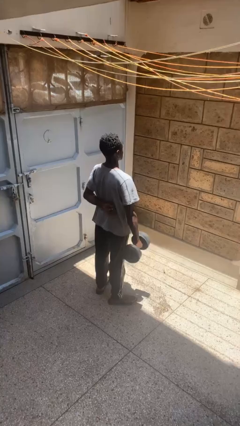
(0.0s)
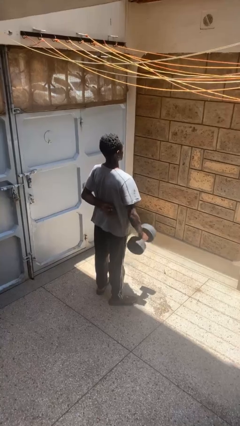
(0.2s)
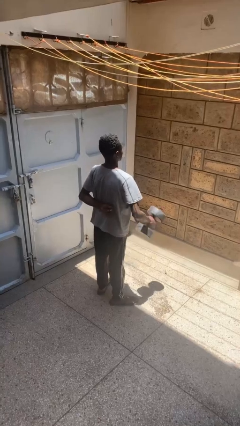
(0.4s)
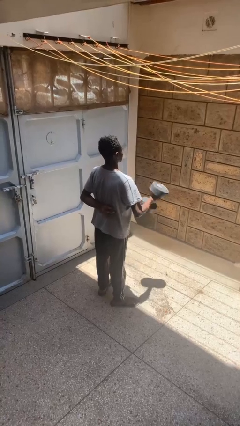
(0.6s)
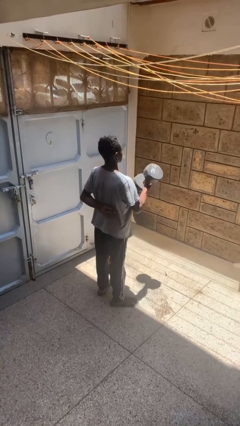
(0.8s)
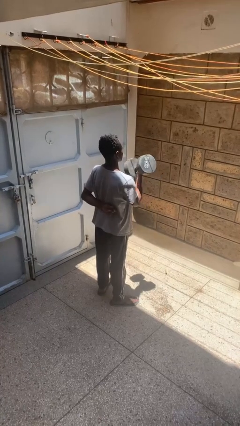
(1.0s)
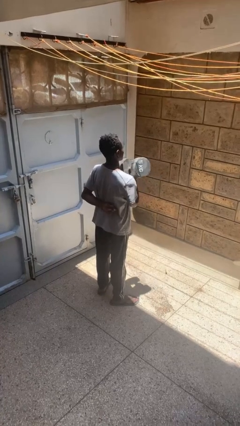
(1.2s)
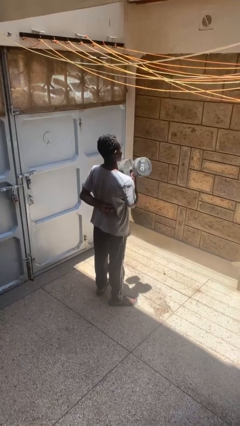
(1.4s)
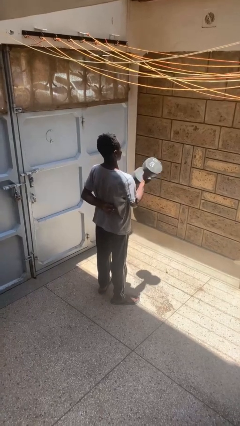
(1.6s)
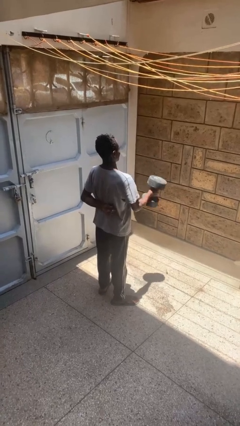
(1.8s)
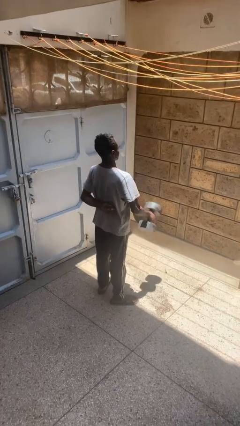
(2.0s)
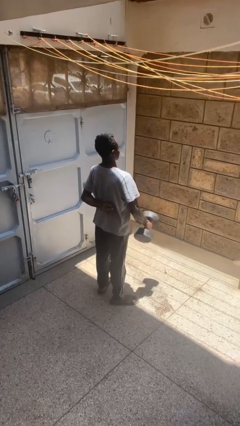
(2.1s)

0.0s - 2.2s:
person lifts dumbbells

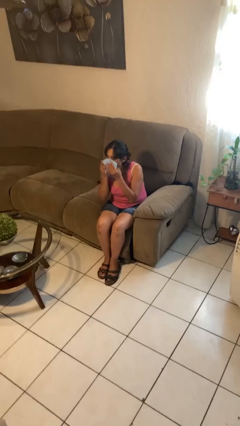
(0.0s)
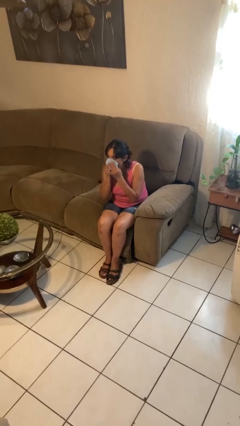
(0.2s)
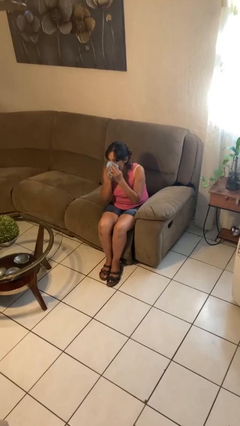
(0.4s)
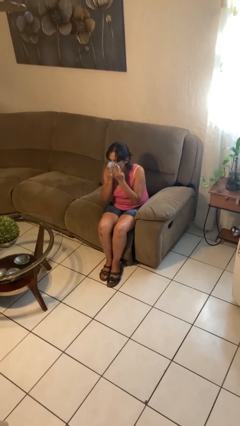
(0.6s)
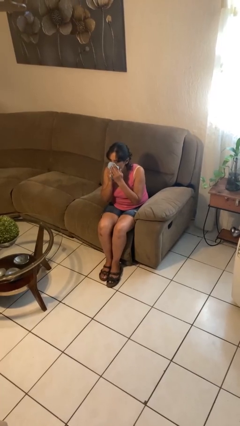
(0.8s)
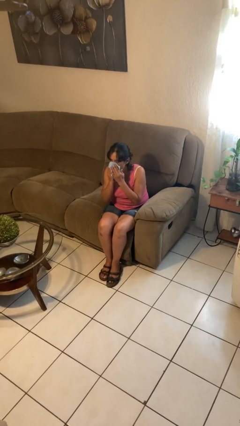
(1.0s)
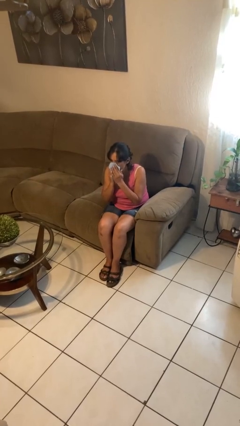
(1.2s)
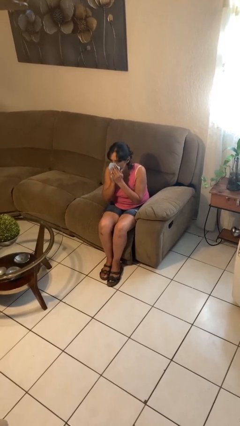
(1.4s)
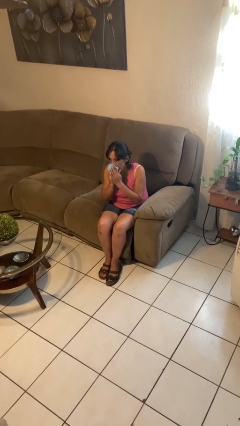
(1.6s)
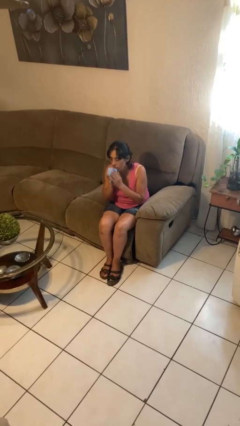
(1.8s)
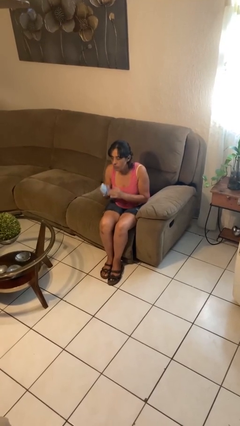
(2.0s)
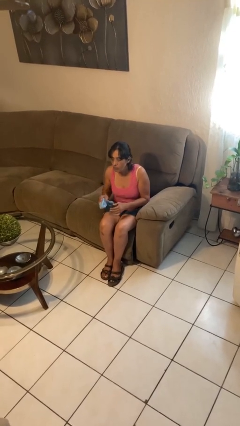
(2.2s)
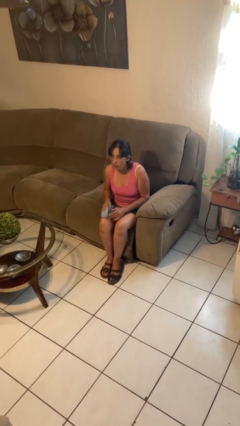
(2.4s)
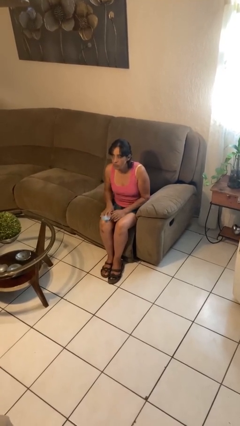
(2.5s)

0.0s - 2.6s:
person blows nose

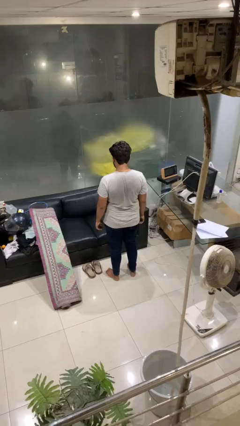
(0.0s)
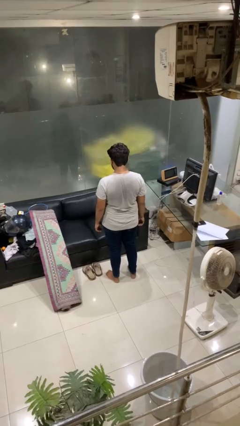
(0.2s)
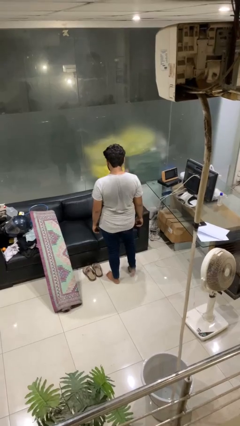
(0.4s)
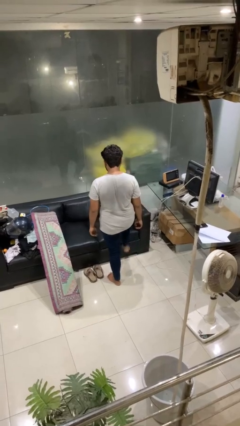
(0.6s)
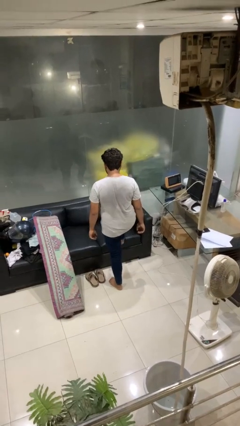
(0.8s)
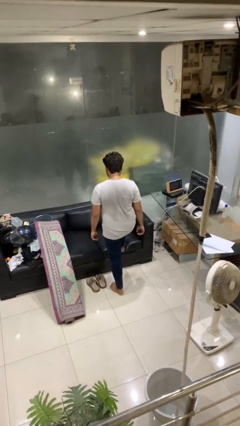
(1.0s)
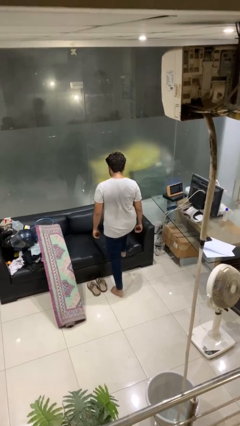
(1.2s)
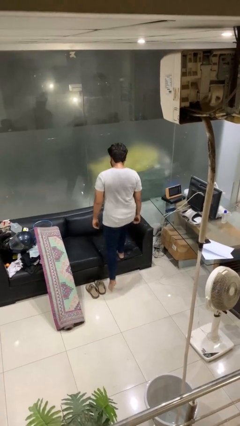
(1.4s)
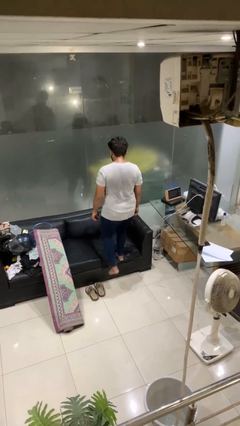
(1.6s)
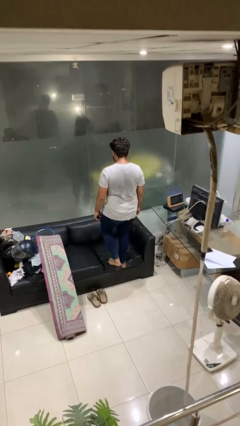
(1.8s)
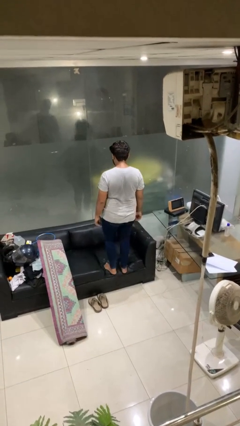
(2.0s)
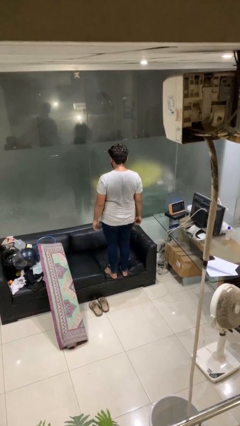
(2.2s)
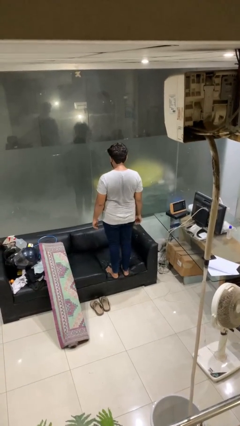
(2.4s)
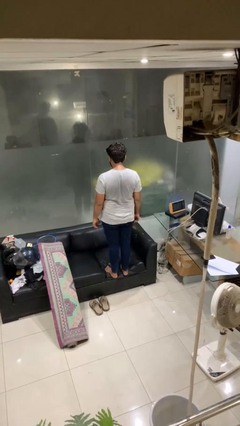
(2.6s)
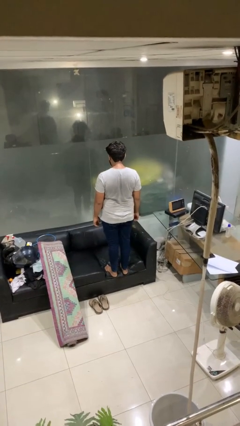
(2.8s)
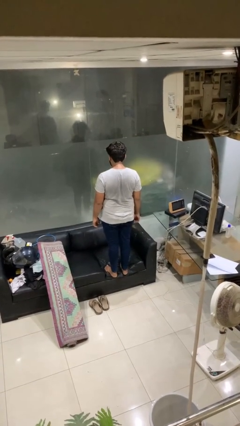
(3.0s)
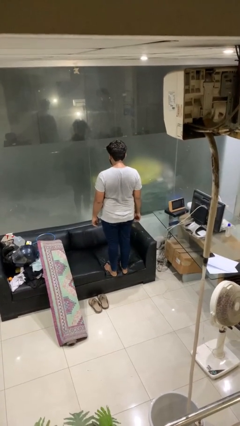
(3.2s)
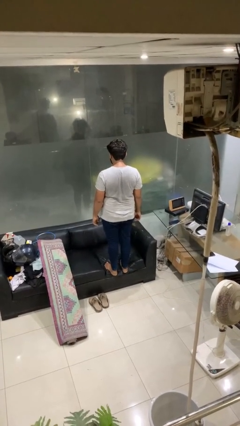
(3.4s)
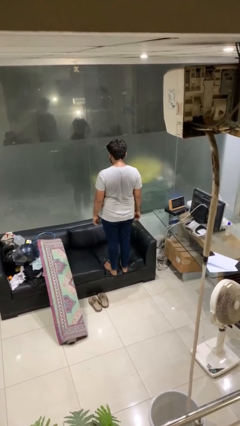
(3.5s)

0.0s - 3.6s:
person climbs on couch

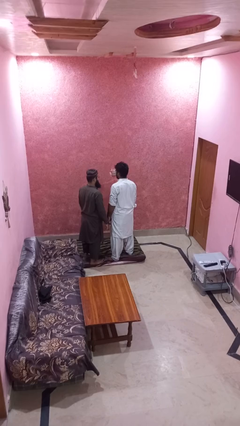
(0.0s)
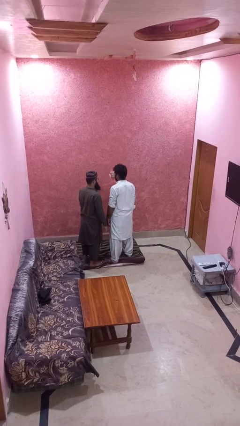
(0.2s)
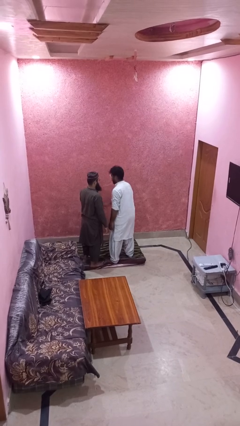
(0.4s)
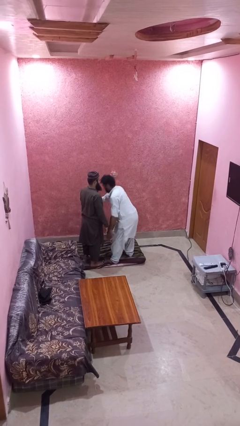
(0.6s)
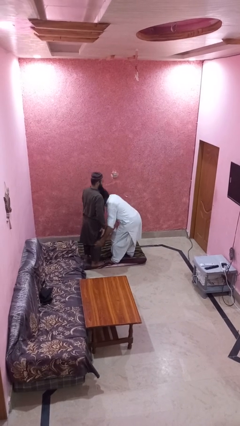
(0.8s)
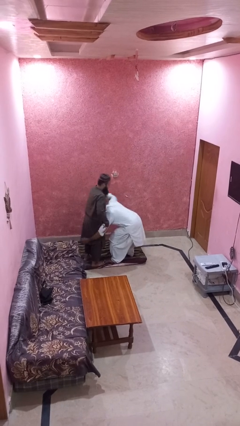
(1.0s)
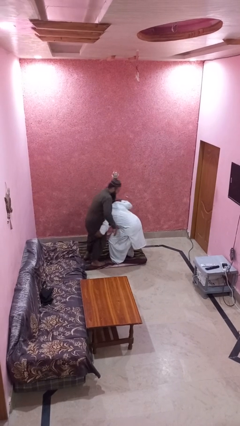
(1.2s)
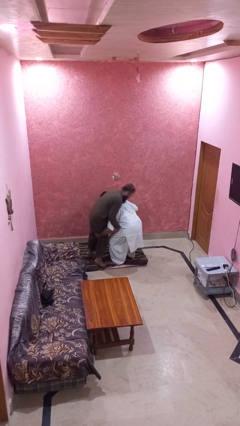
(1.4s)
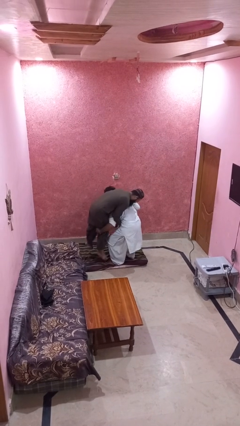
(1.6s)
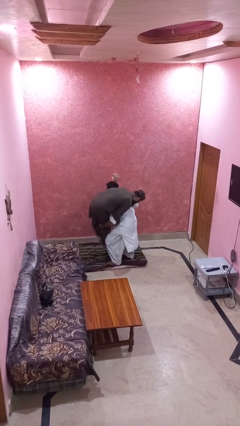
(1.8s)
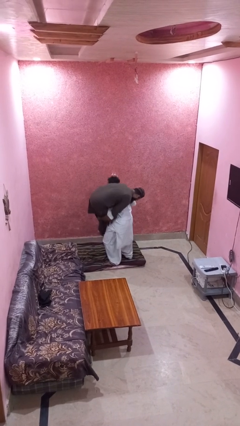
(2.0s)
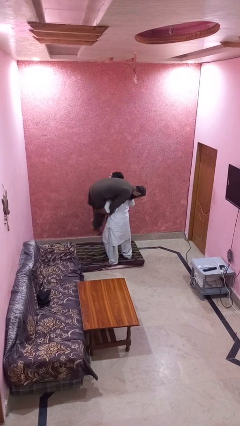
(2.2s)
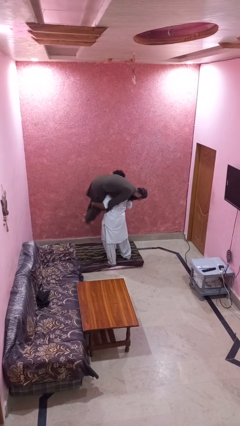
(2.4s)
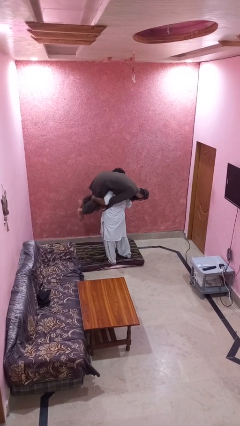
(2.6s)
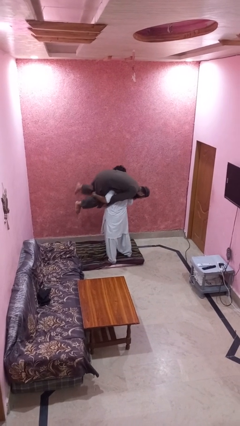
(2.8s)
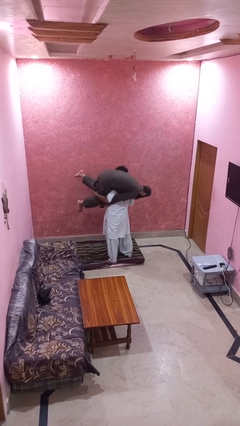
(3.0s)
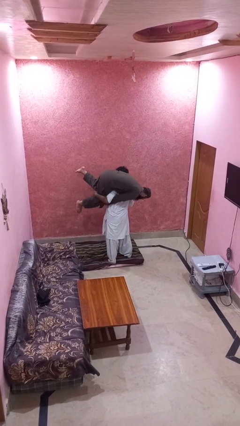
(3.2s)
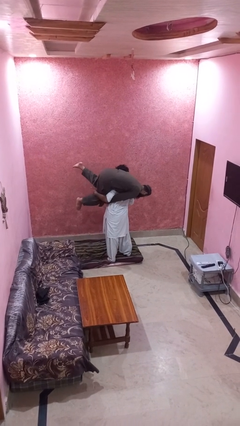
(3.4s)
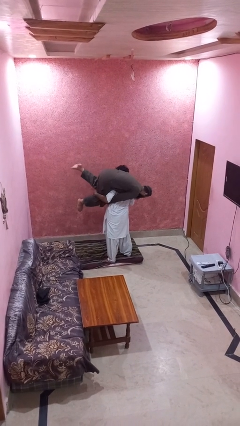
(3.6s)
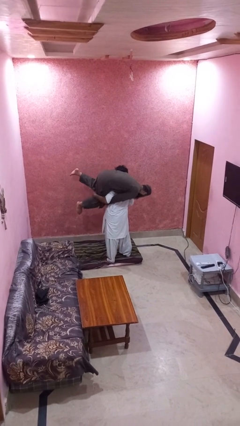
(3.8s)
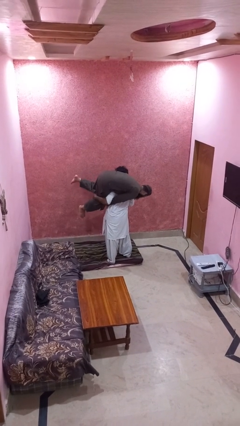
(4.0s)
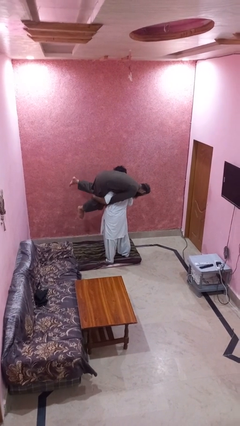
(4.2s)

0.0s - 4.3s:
person carries person over shoulder

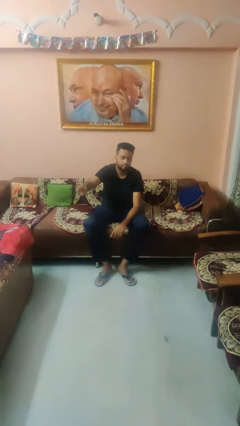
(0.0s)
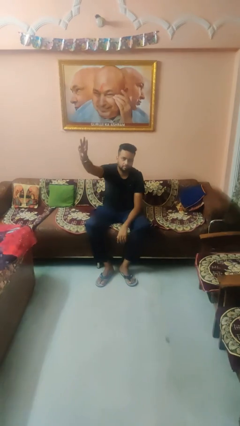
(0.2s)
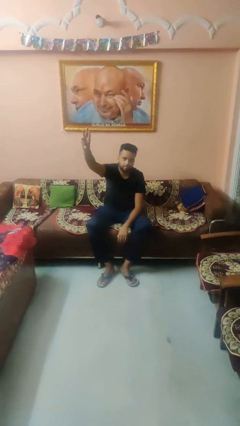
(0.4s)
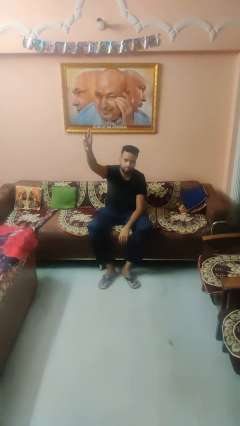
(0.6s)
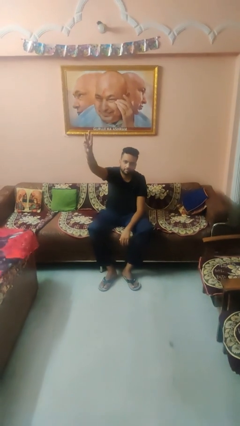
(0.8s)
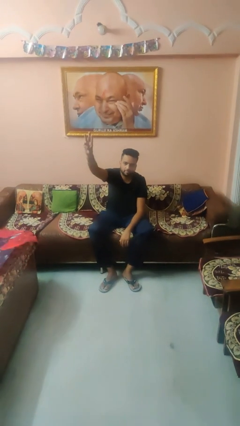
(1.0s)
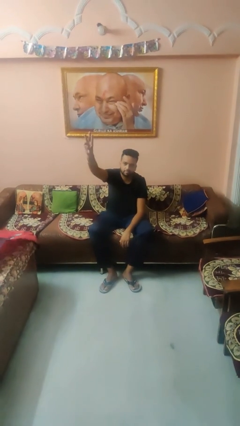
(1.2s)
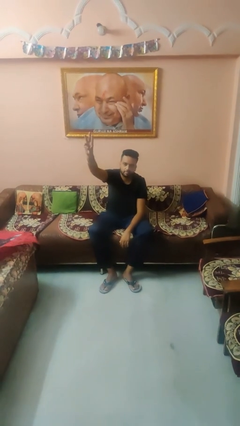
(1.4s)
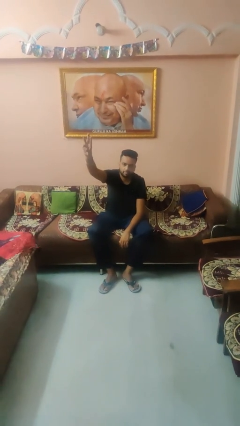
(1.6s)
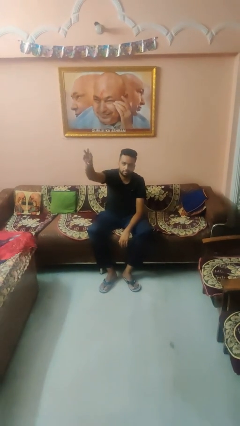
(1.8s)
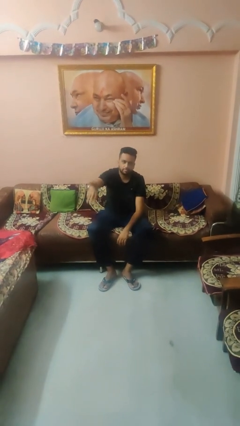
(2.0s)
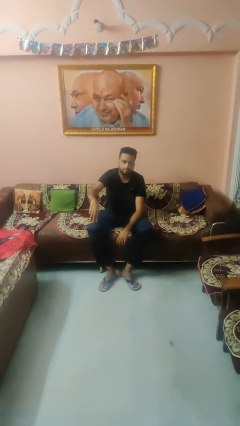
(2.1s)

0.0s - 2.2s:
person gestures number three

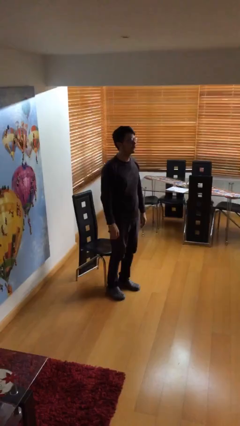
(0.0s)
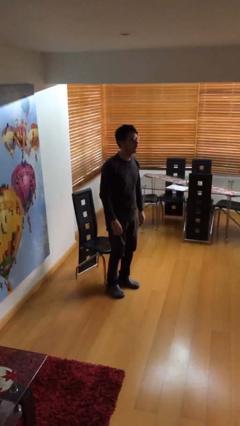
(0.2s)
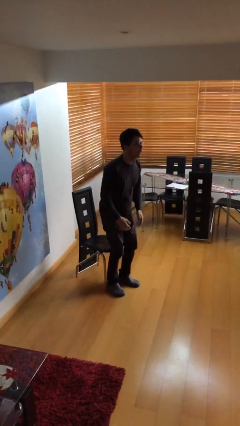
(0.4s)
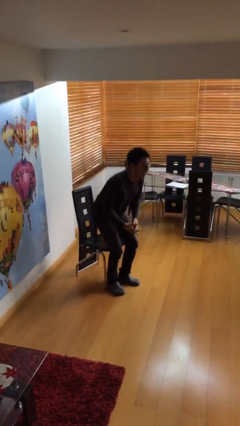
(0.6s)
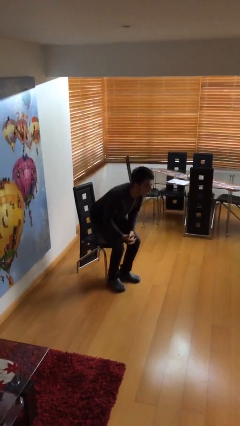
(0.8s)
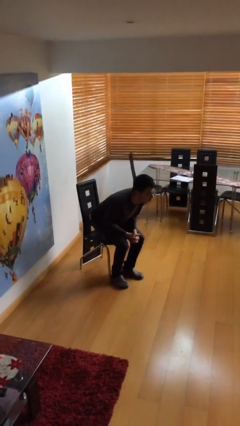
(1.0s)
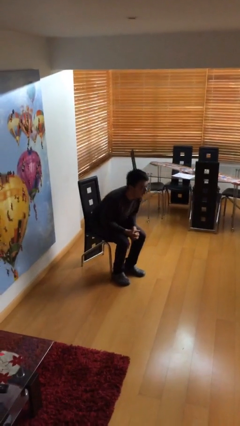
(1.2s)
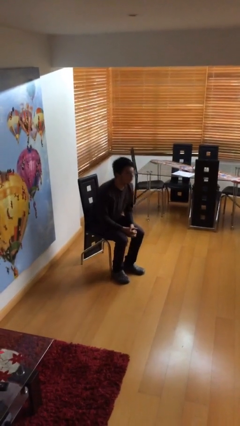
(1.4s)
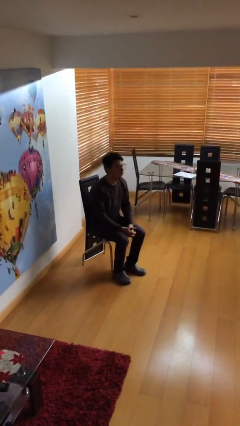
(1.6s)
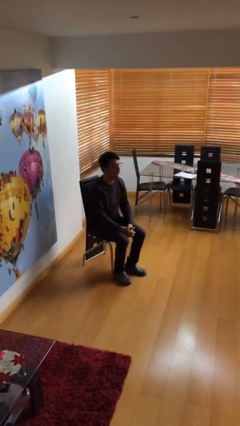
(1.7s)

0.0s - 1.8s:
person sits down

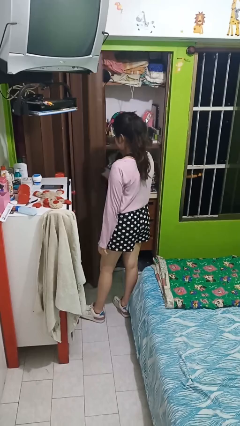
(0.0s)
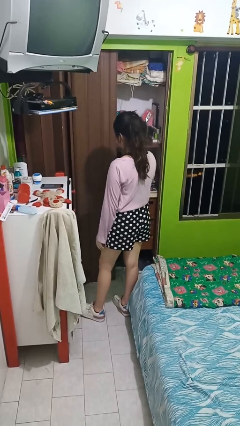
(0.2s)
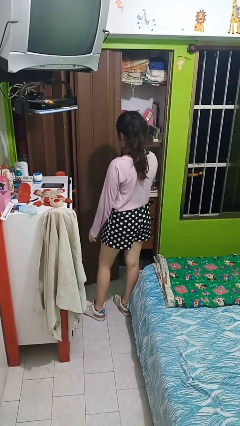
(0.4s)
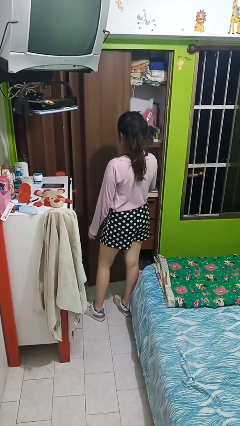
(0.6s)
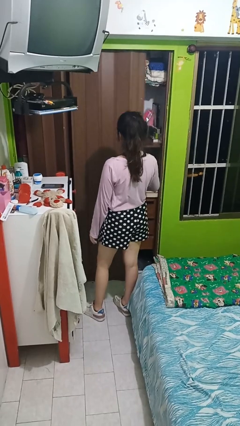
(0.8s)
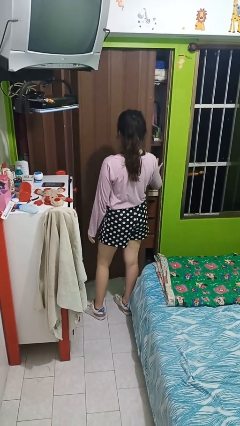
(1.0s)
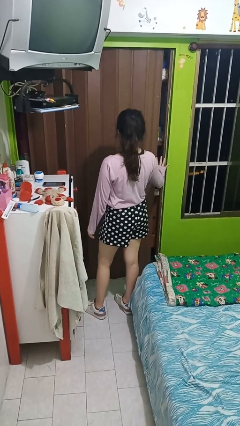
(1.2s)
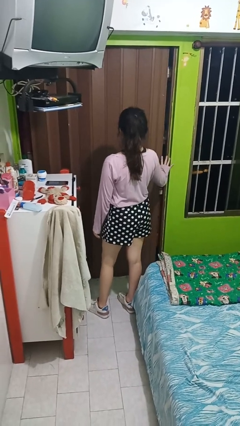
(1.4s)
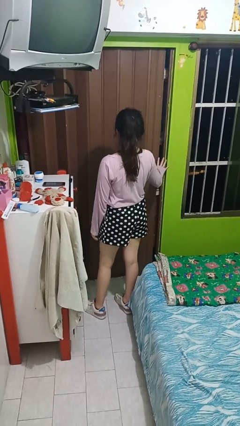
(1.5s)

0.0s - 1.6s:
person closes sliding door
